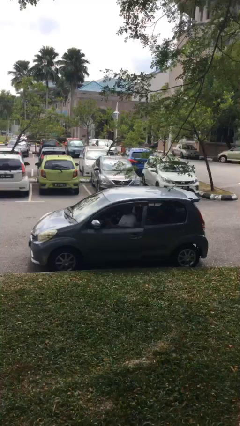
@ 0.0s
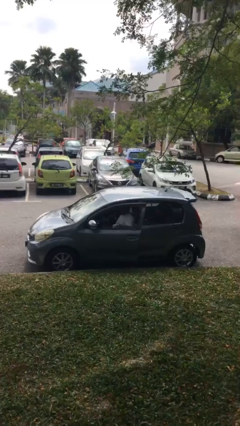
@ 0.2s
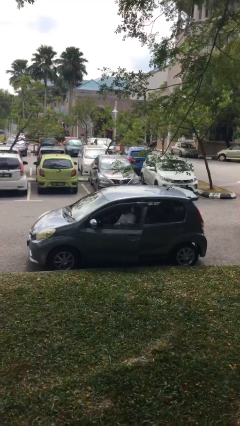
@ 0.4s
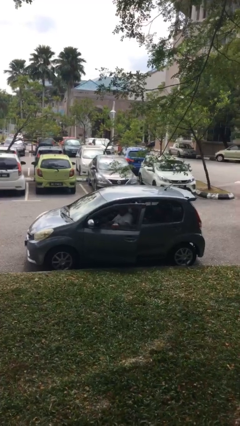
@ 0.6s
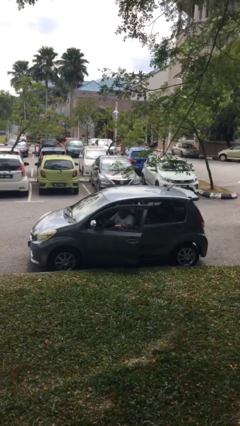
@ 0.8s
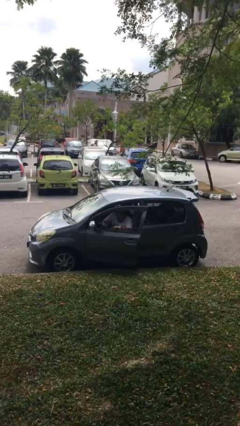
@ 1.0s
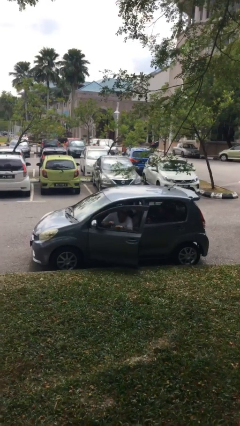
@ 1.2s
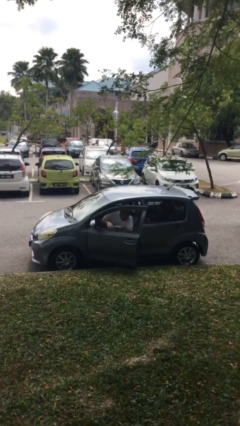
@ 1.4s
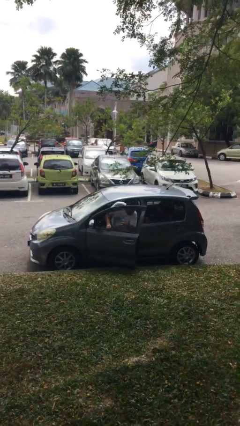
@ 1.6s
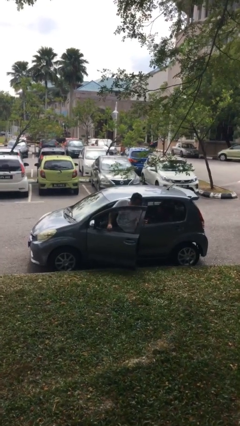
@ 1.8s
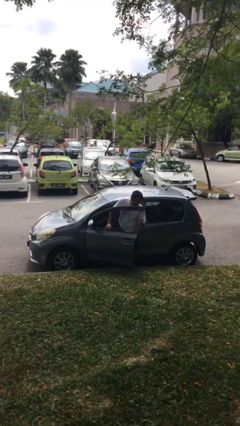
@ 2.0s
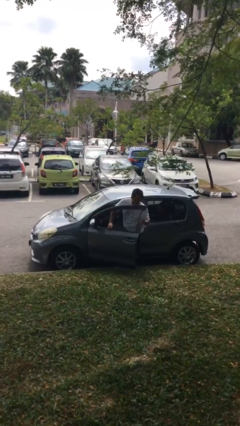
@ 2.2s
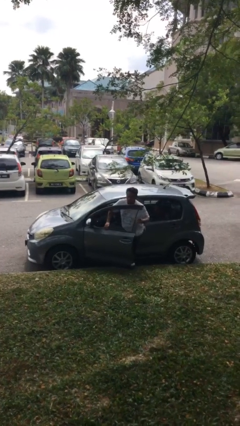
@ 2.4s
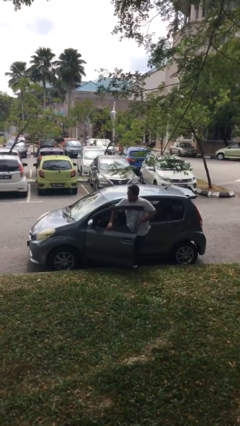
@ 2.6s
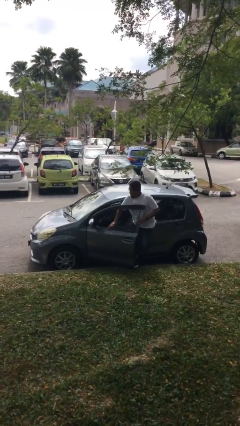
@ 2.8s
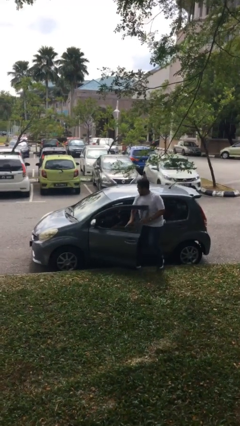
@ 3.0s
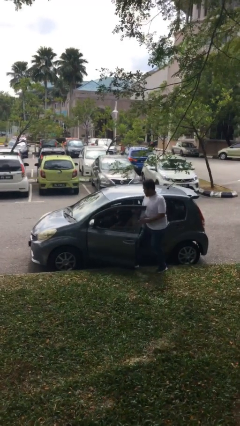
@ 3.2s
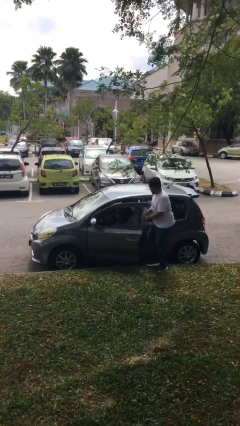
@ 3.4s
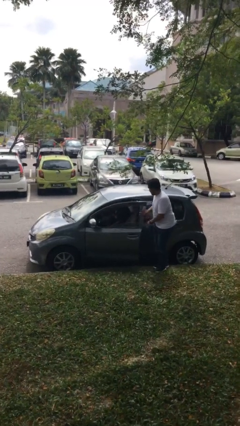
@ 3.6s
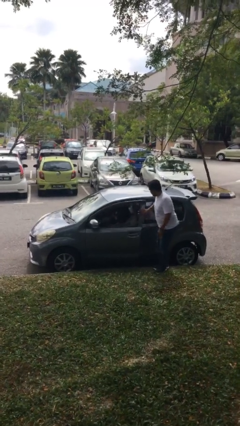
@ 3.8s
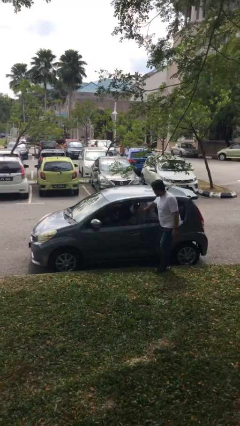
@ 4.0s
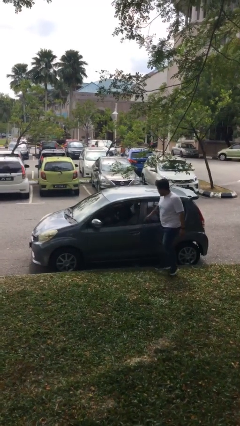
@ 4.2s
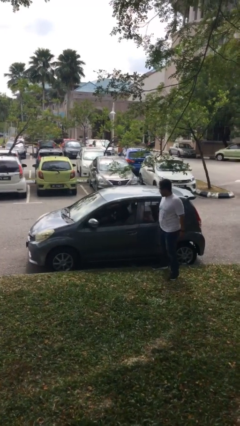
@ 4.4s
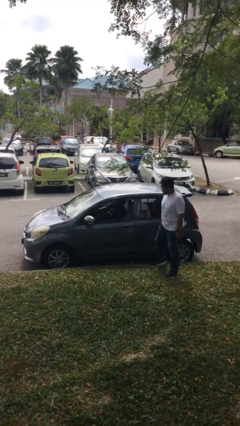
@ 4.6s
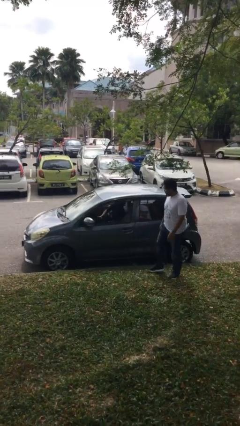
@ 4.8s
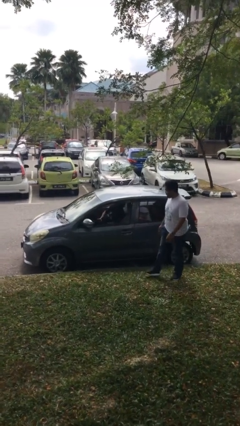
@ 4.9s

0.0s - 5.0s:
car drops off person

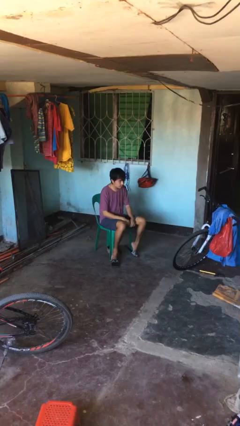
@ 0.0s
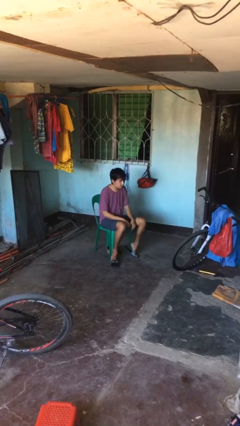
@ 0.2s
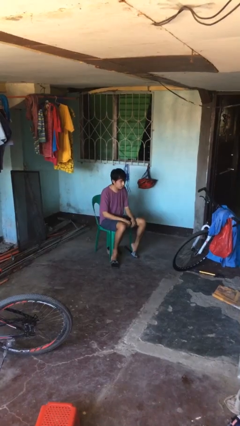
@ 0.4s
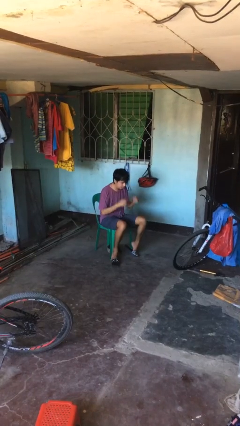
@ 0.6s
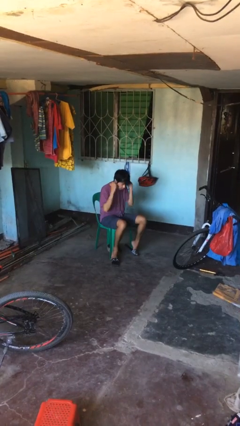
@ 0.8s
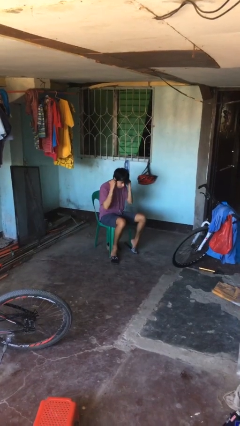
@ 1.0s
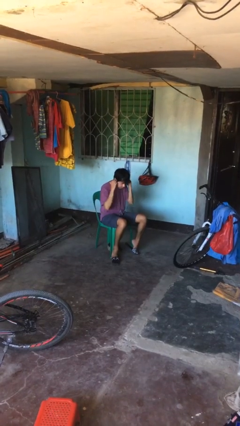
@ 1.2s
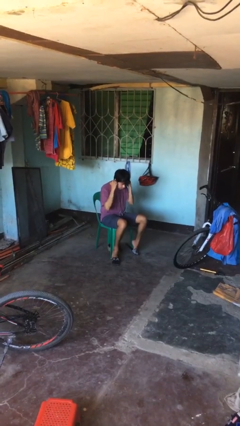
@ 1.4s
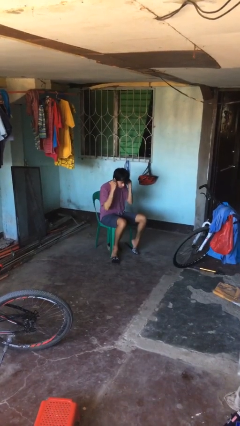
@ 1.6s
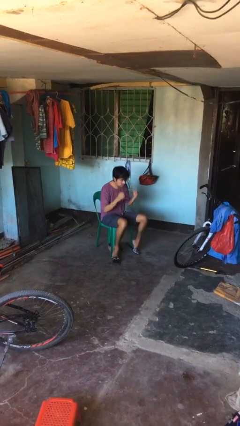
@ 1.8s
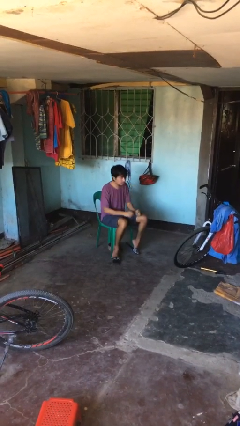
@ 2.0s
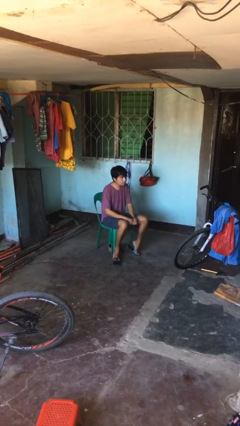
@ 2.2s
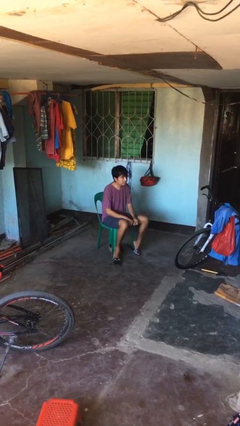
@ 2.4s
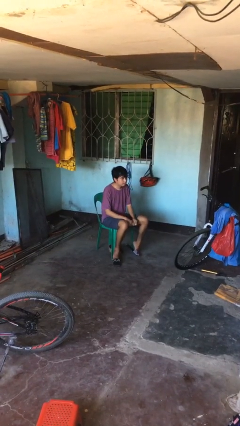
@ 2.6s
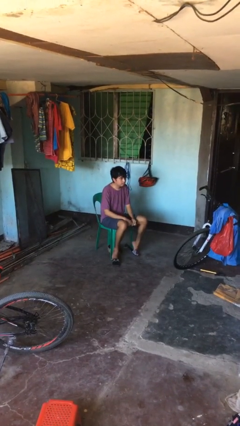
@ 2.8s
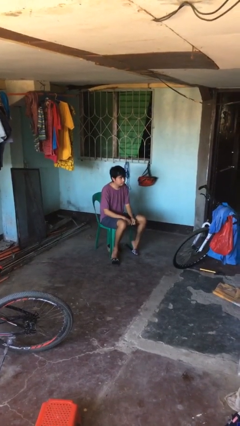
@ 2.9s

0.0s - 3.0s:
person takes off headphones

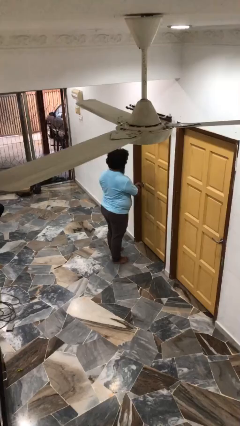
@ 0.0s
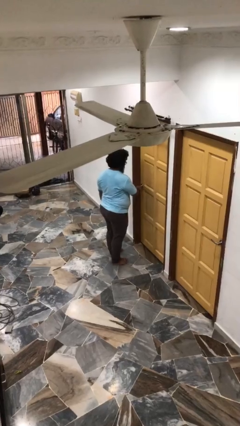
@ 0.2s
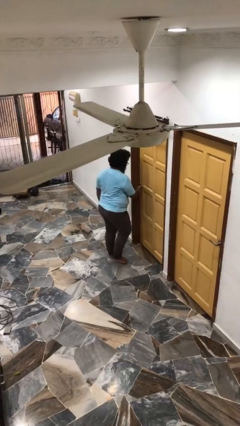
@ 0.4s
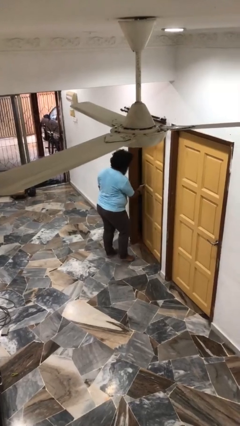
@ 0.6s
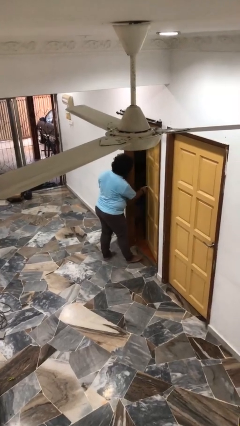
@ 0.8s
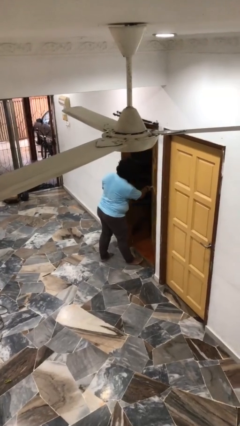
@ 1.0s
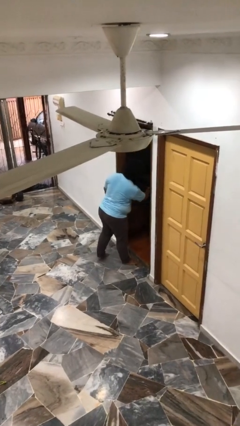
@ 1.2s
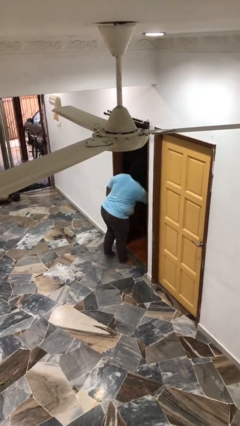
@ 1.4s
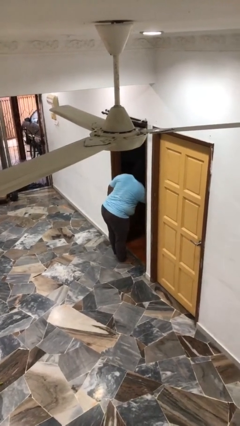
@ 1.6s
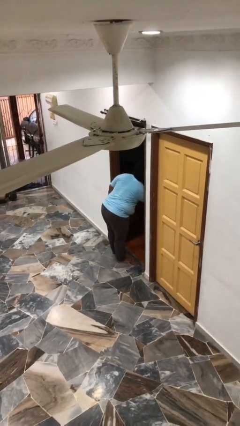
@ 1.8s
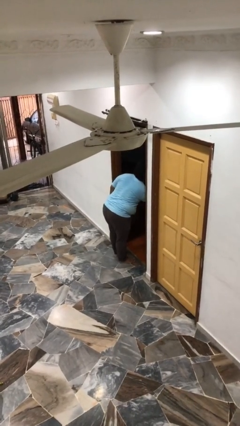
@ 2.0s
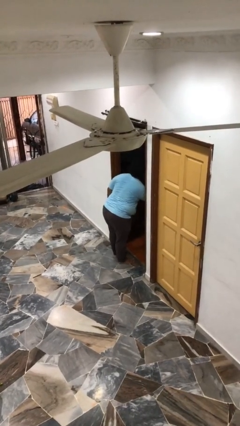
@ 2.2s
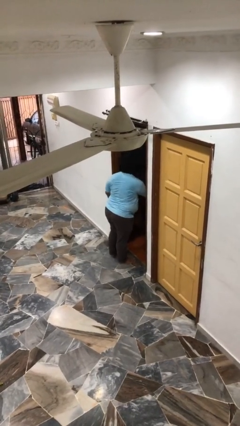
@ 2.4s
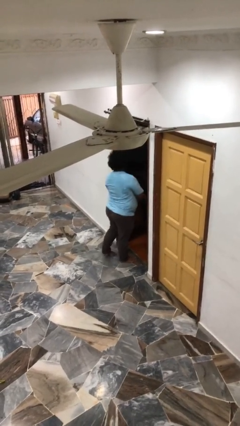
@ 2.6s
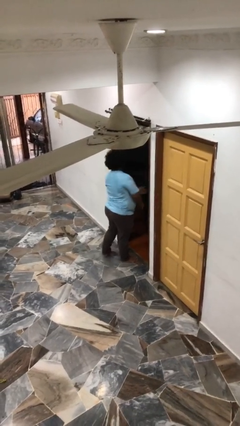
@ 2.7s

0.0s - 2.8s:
person opens facility door

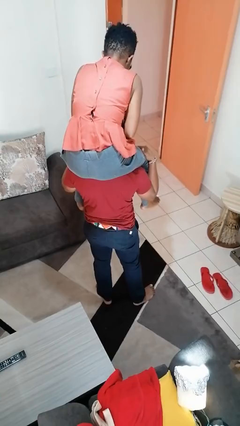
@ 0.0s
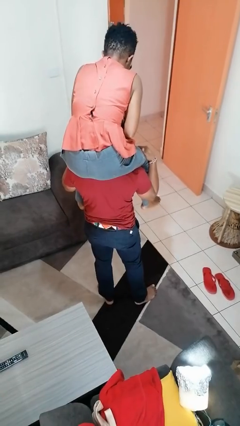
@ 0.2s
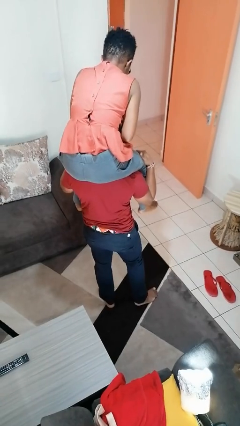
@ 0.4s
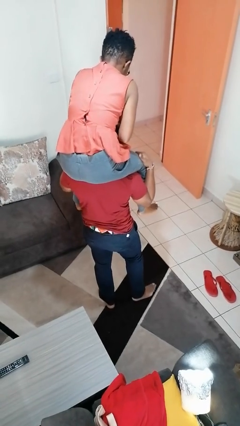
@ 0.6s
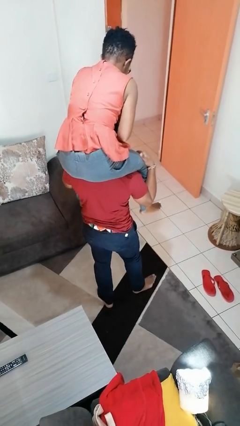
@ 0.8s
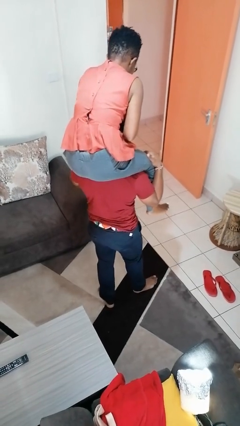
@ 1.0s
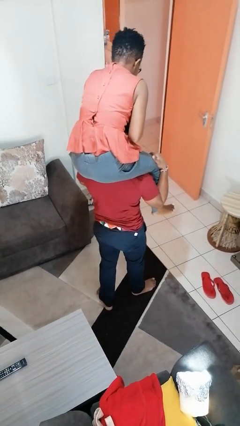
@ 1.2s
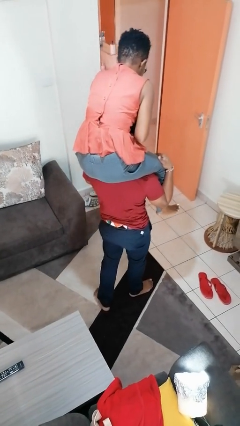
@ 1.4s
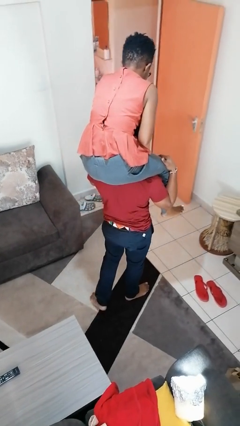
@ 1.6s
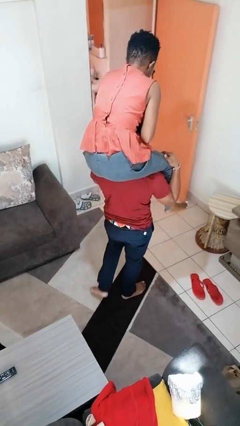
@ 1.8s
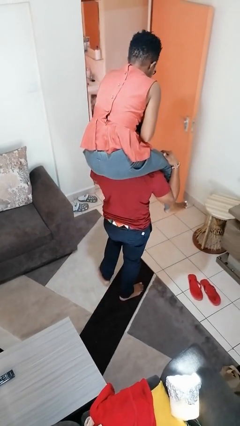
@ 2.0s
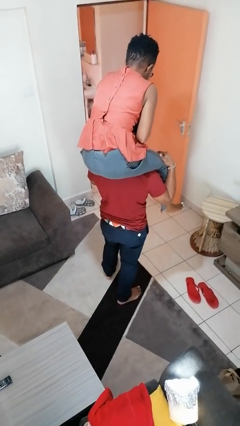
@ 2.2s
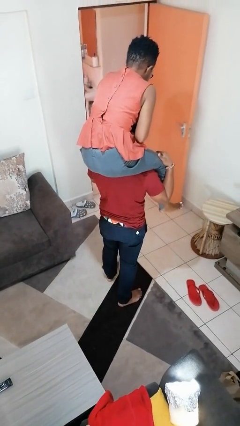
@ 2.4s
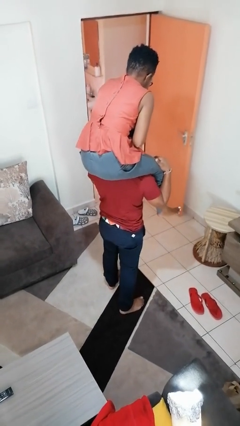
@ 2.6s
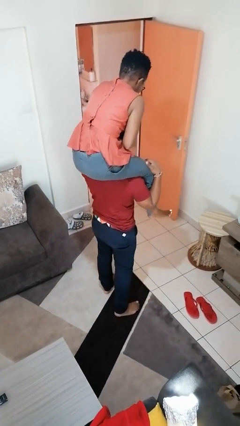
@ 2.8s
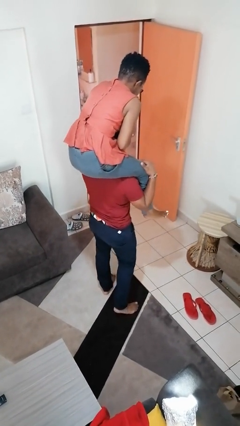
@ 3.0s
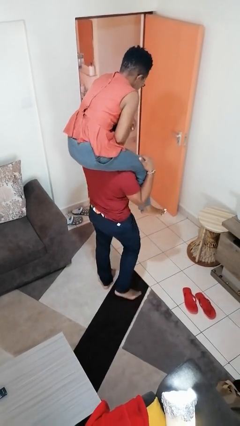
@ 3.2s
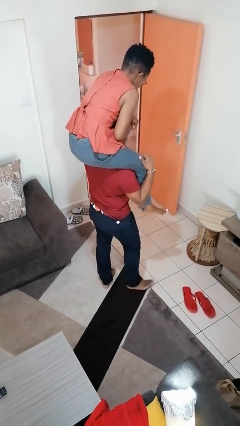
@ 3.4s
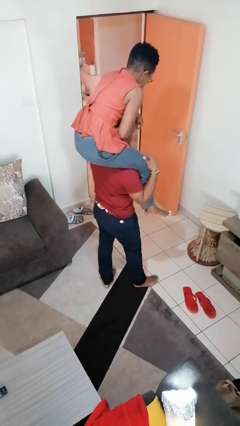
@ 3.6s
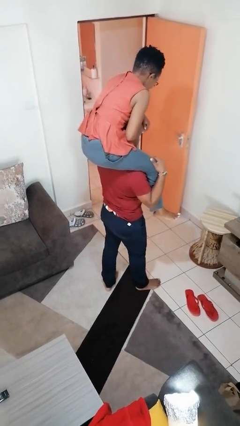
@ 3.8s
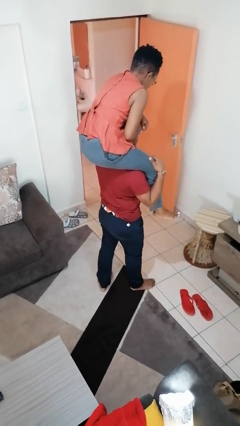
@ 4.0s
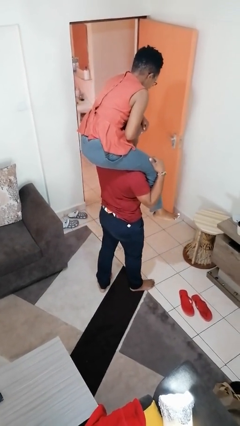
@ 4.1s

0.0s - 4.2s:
person carries person on shoulders

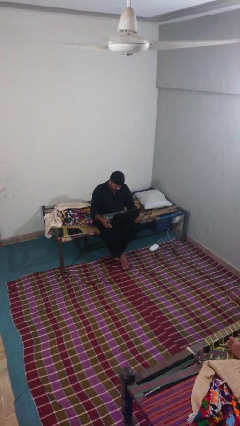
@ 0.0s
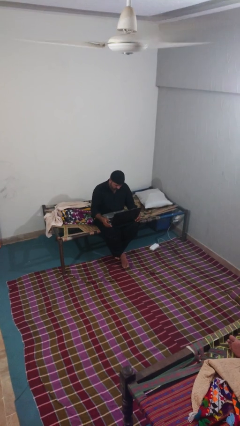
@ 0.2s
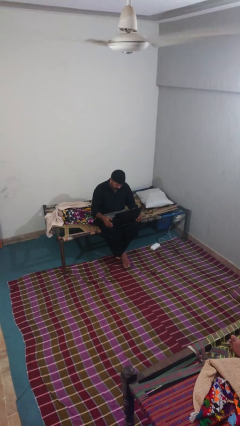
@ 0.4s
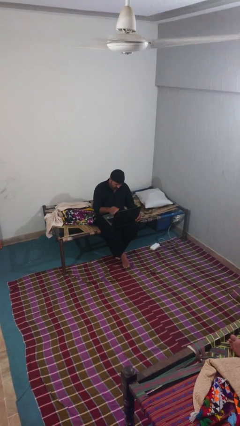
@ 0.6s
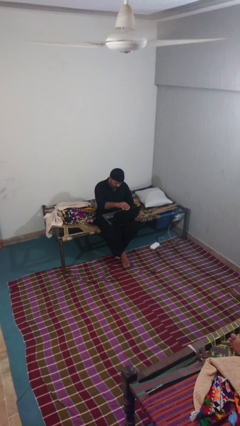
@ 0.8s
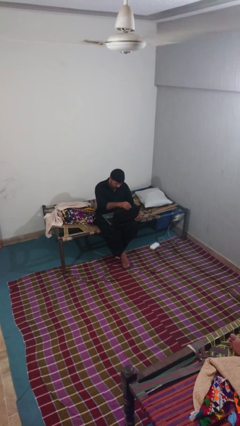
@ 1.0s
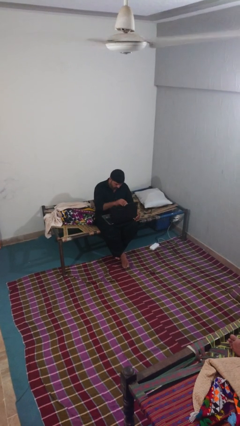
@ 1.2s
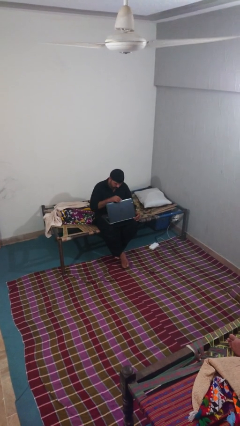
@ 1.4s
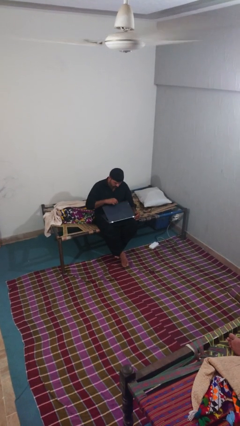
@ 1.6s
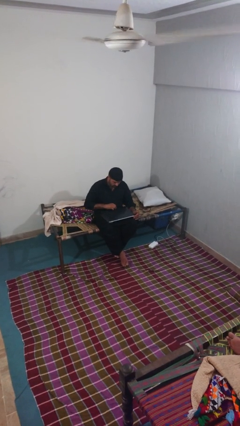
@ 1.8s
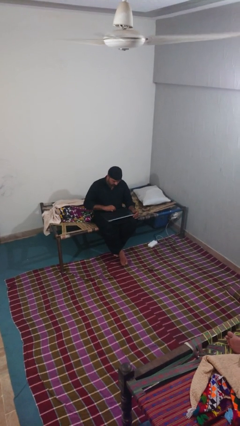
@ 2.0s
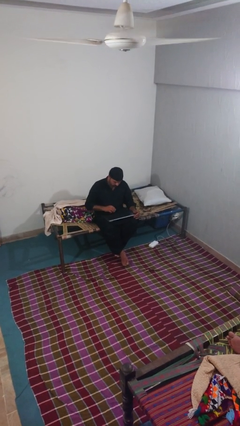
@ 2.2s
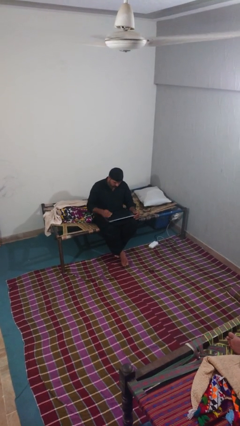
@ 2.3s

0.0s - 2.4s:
person closes laptop
